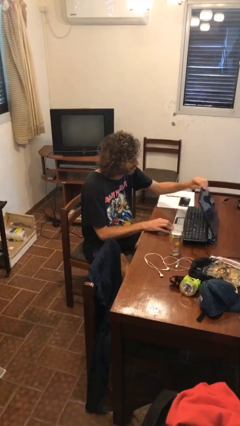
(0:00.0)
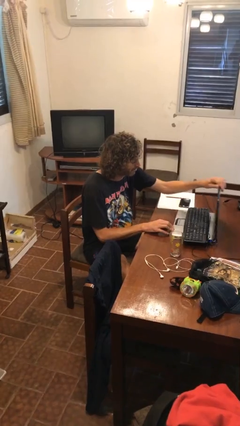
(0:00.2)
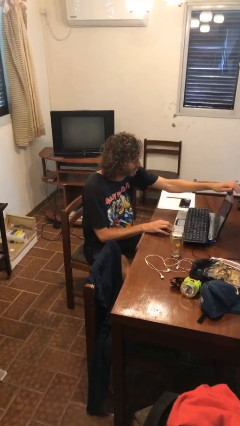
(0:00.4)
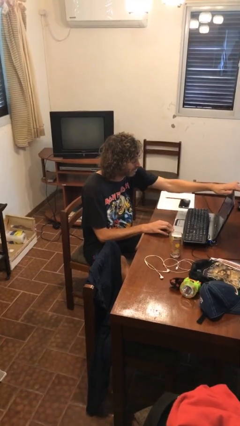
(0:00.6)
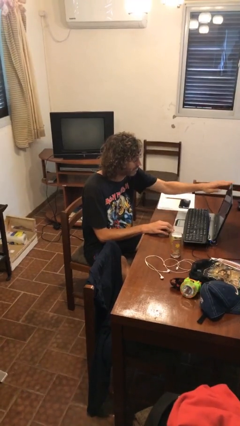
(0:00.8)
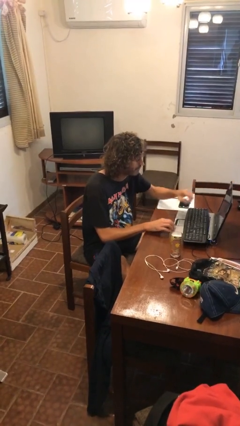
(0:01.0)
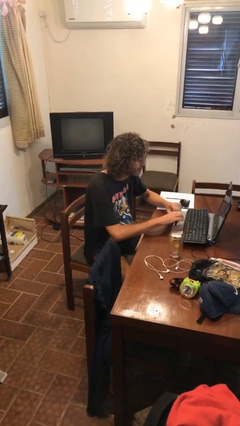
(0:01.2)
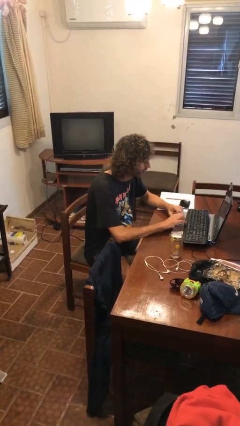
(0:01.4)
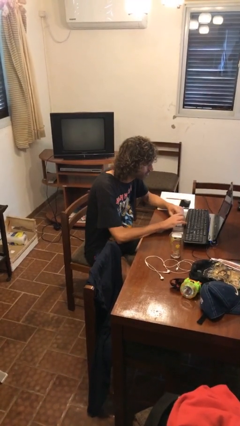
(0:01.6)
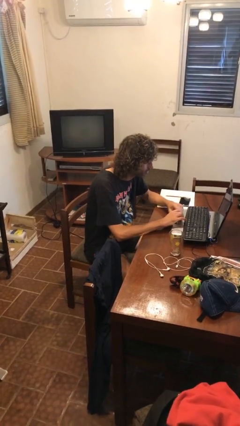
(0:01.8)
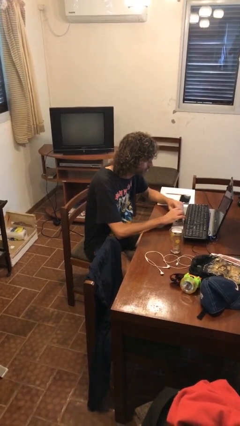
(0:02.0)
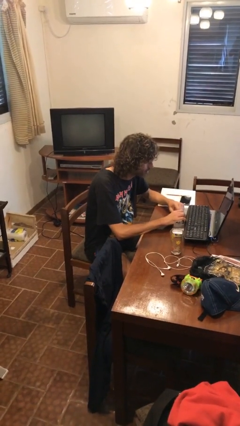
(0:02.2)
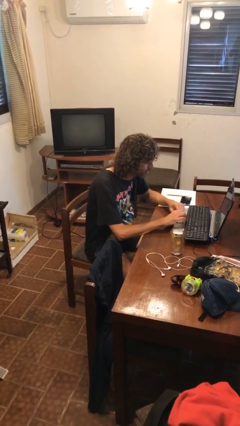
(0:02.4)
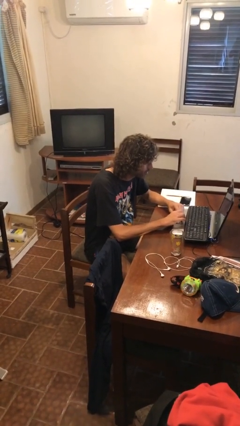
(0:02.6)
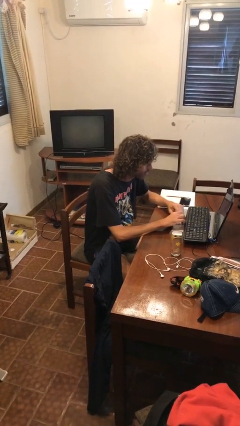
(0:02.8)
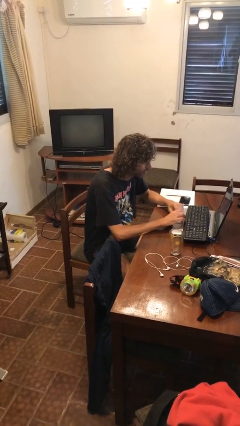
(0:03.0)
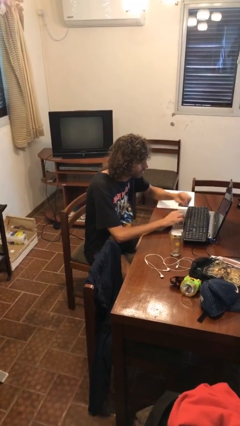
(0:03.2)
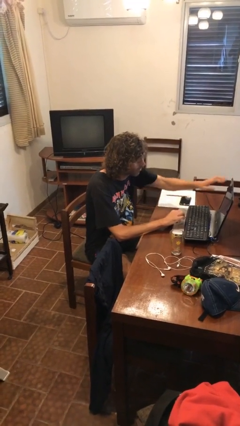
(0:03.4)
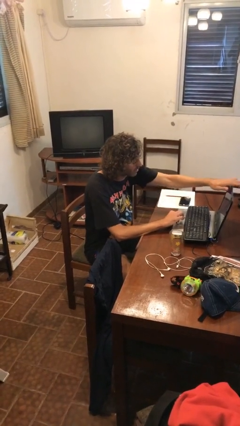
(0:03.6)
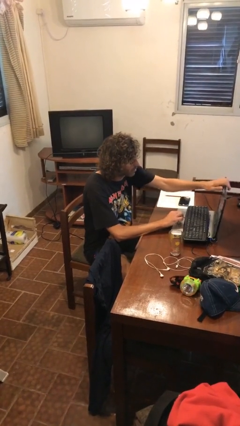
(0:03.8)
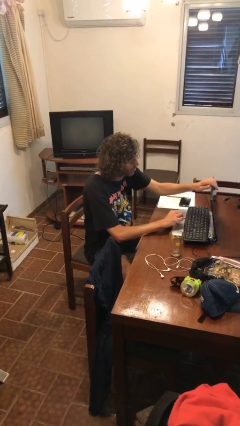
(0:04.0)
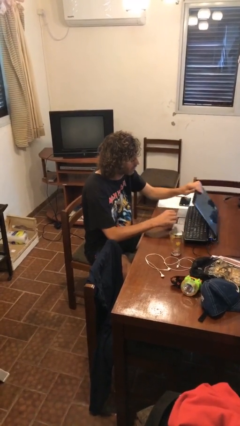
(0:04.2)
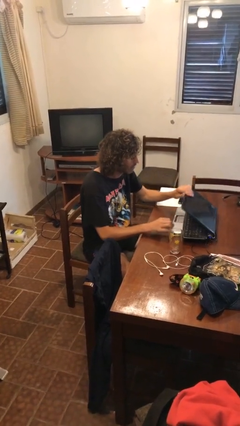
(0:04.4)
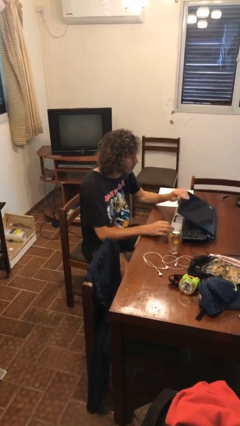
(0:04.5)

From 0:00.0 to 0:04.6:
person interacts with laptop

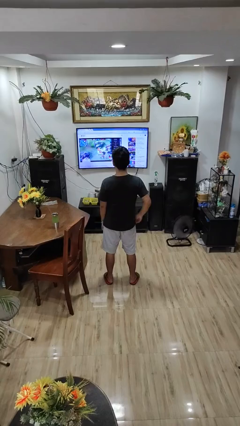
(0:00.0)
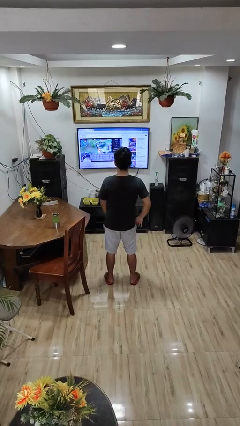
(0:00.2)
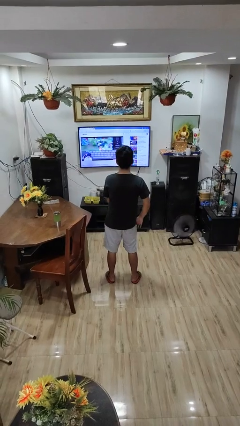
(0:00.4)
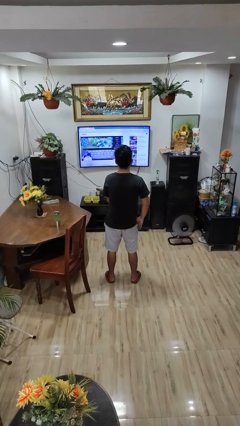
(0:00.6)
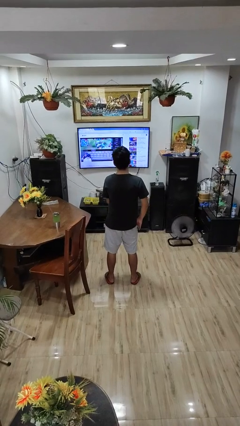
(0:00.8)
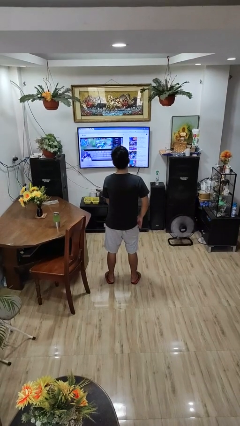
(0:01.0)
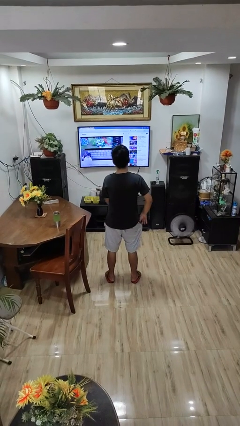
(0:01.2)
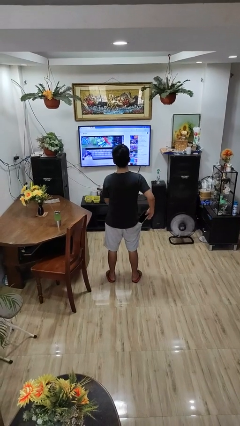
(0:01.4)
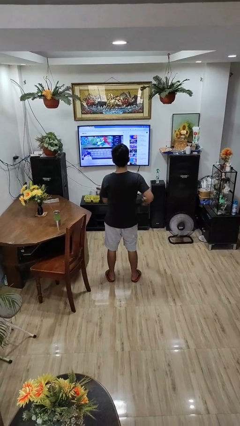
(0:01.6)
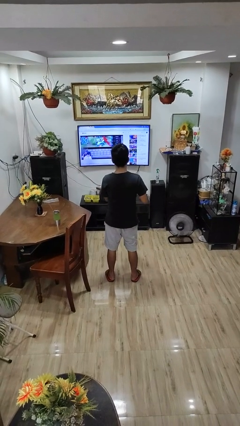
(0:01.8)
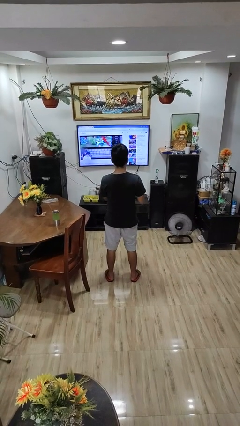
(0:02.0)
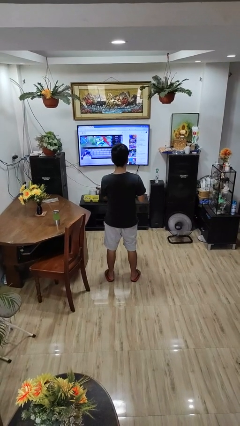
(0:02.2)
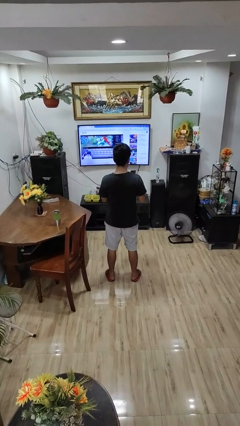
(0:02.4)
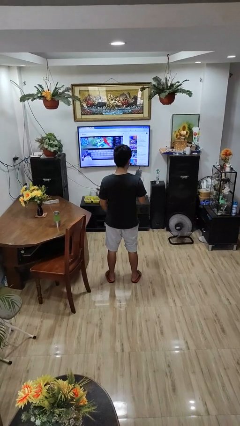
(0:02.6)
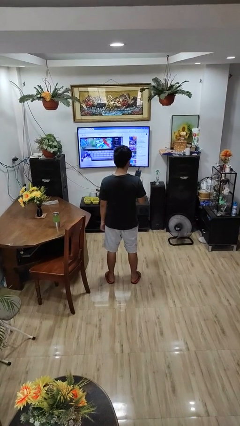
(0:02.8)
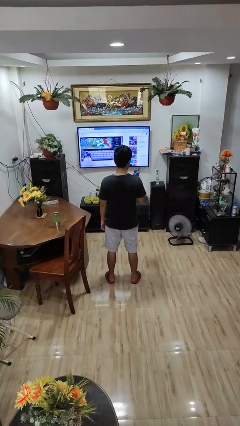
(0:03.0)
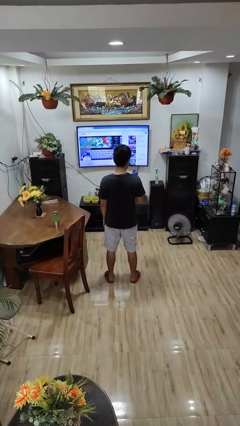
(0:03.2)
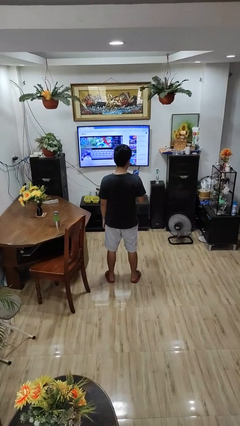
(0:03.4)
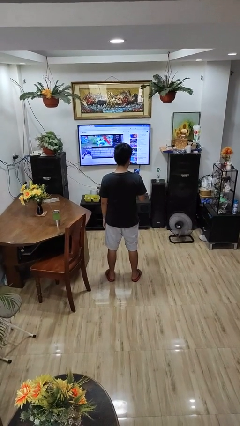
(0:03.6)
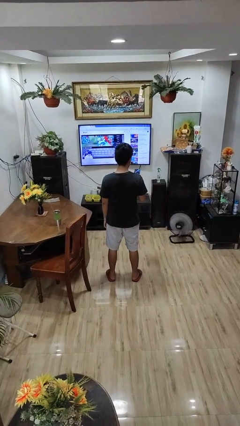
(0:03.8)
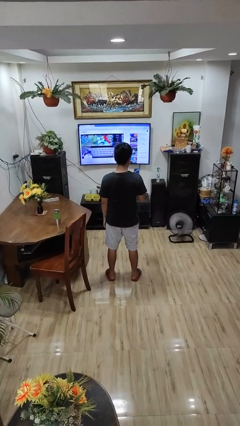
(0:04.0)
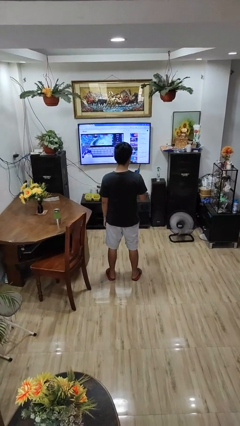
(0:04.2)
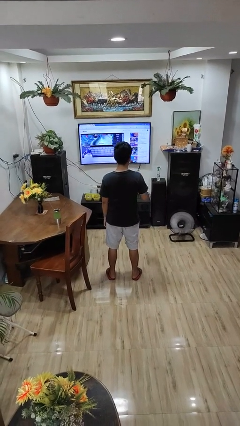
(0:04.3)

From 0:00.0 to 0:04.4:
person takes phone from pocket

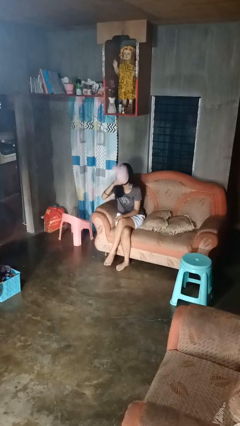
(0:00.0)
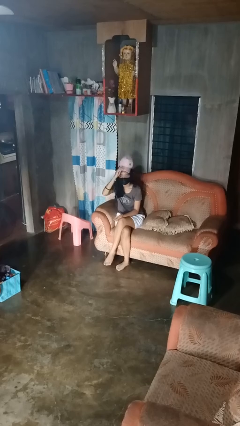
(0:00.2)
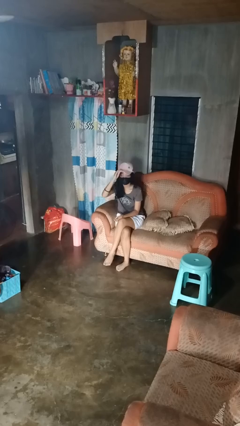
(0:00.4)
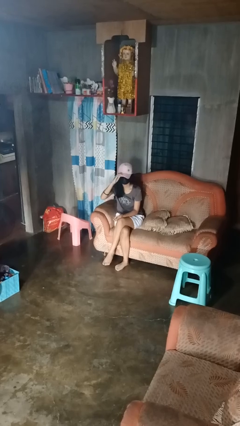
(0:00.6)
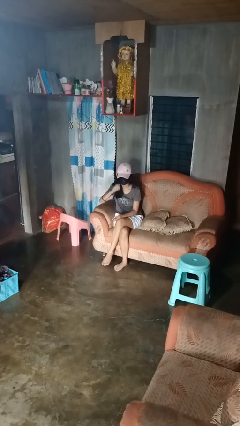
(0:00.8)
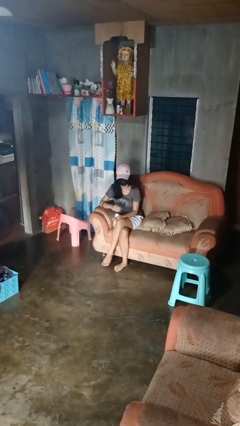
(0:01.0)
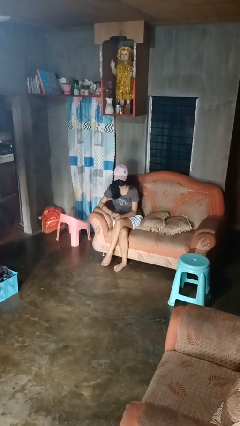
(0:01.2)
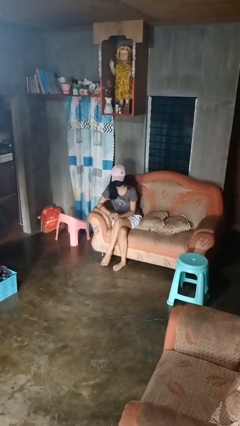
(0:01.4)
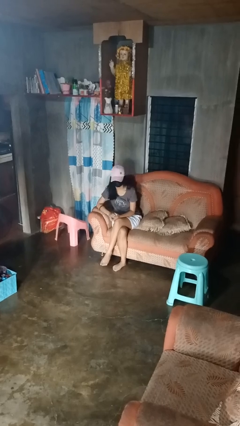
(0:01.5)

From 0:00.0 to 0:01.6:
person puts on hat

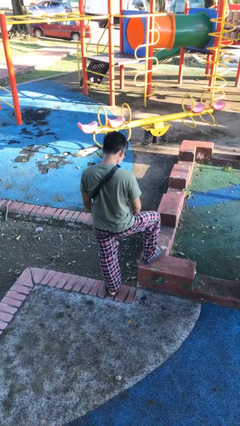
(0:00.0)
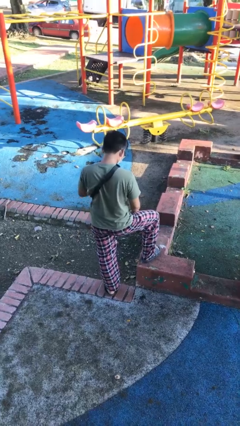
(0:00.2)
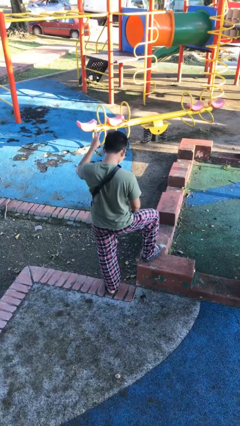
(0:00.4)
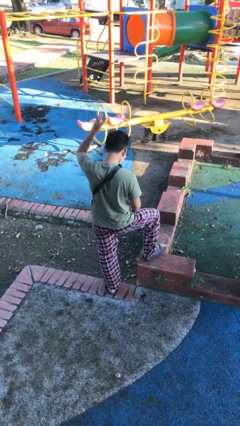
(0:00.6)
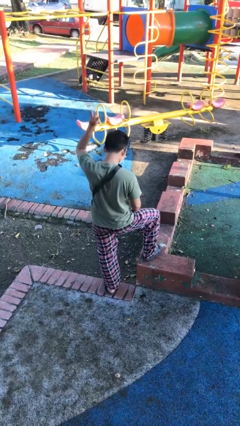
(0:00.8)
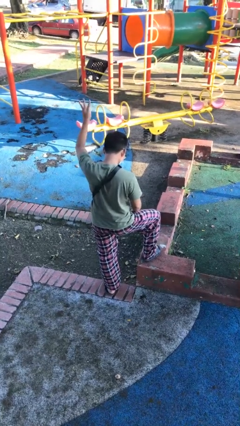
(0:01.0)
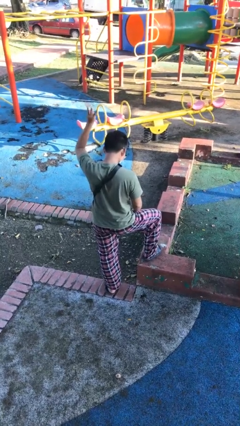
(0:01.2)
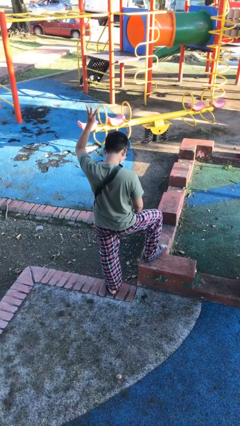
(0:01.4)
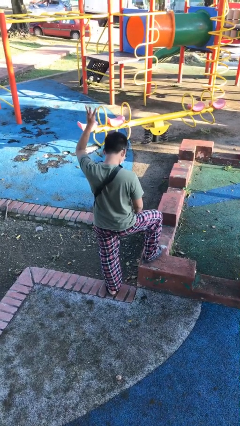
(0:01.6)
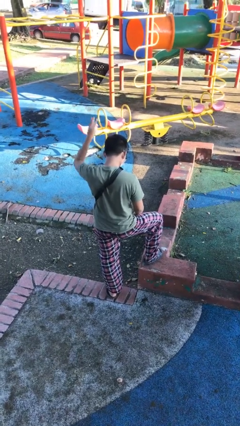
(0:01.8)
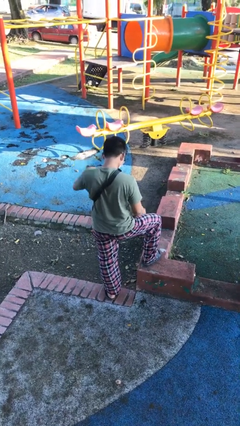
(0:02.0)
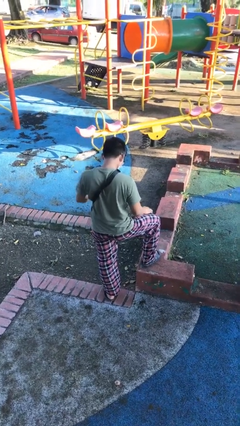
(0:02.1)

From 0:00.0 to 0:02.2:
person gestures number three

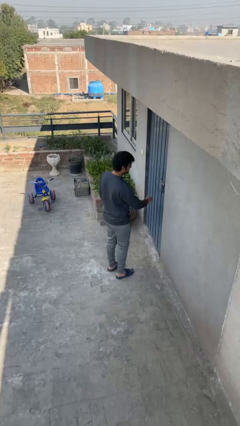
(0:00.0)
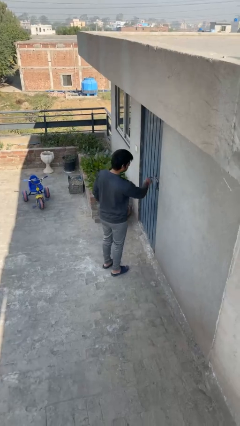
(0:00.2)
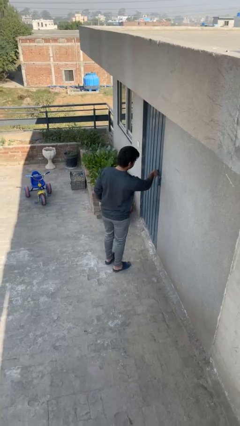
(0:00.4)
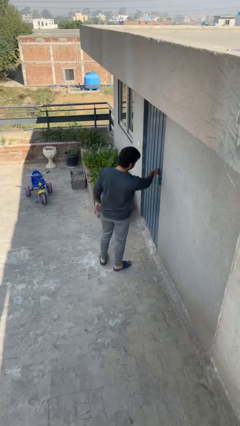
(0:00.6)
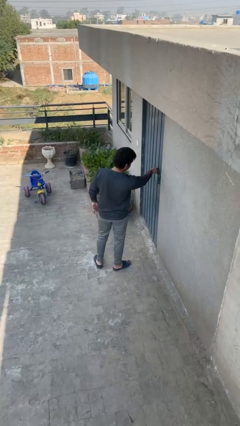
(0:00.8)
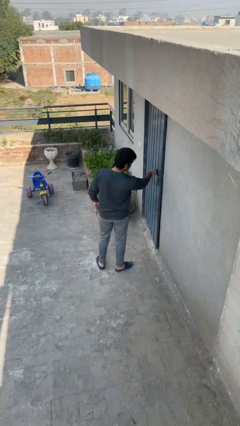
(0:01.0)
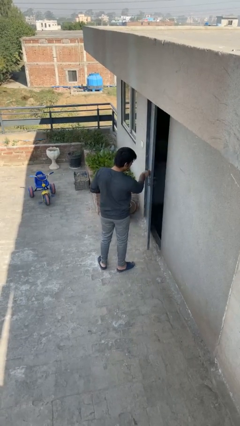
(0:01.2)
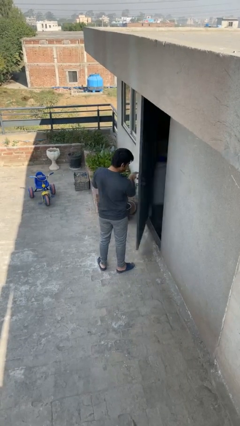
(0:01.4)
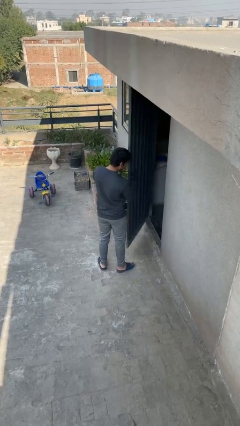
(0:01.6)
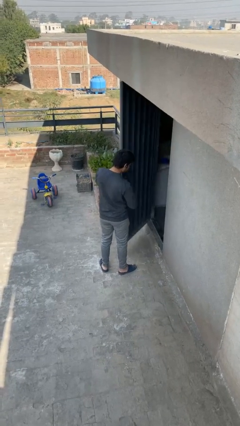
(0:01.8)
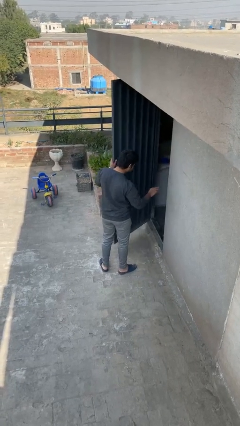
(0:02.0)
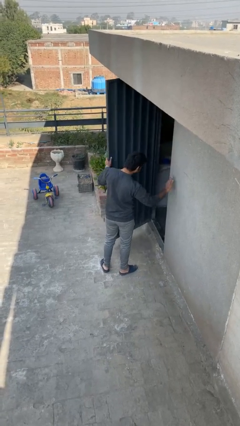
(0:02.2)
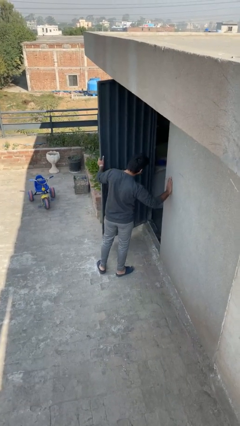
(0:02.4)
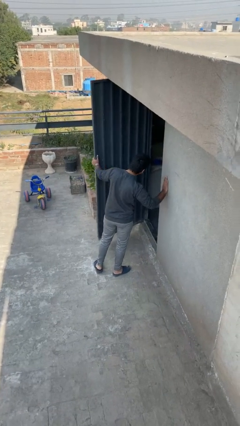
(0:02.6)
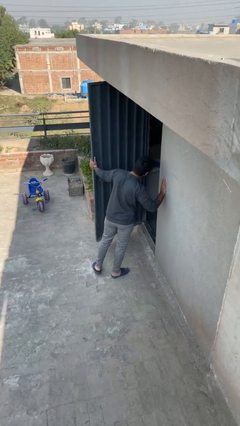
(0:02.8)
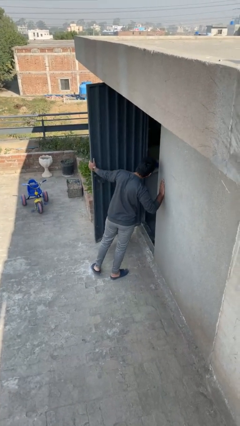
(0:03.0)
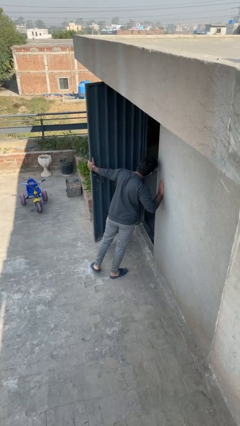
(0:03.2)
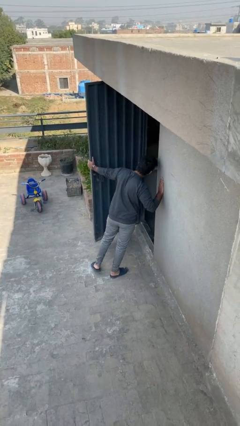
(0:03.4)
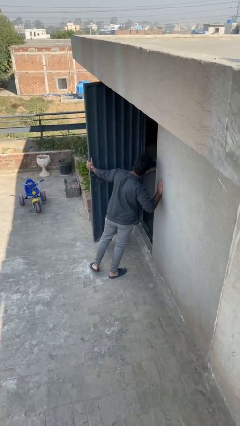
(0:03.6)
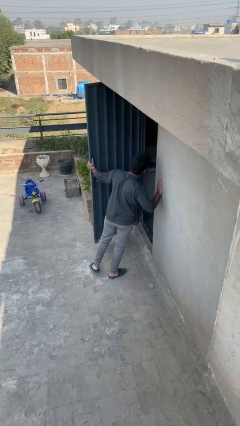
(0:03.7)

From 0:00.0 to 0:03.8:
person opens facility door

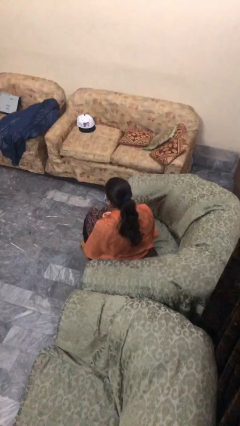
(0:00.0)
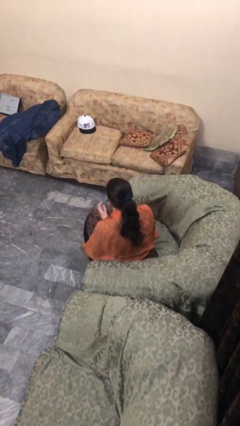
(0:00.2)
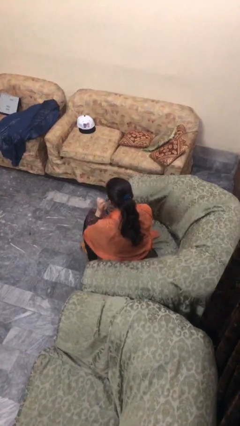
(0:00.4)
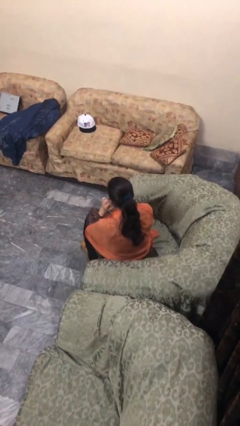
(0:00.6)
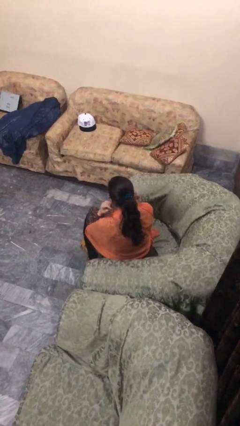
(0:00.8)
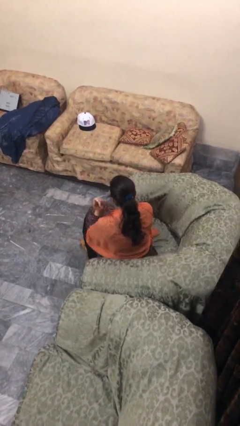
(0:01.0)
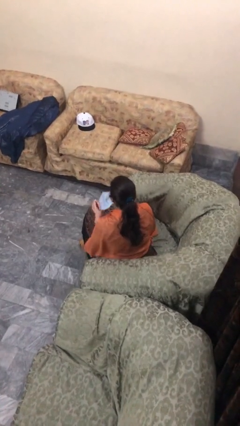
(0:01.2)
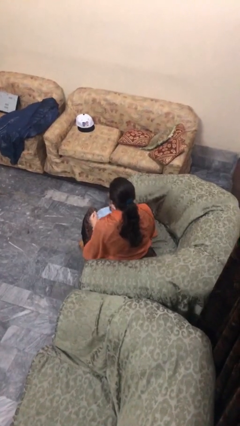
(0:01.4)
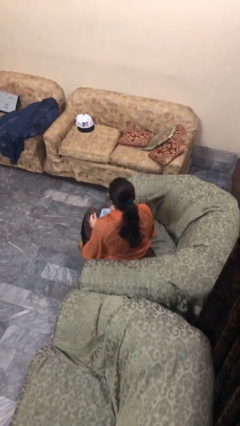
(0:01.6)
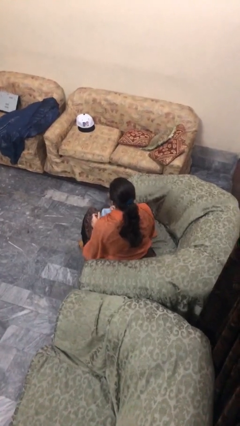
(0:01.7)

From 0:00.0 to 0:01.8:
person takes off facemask
